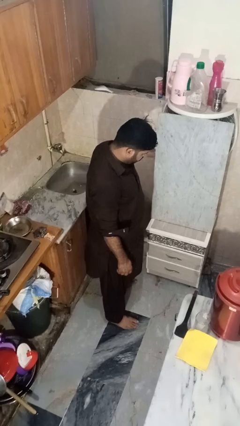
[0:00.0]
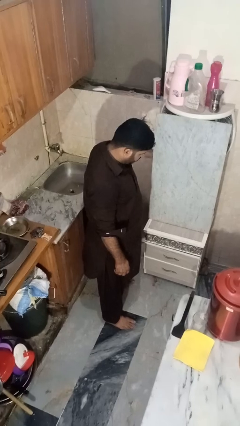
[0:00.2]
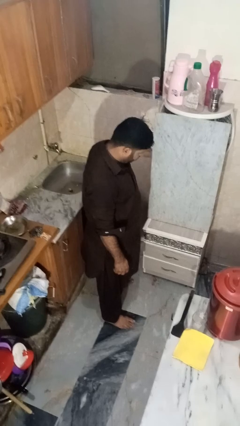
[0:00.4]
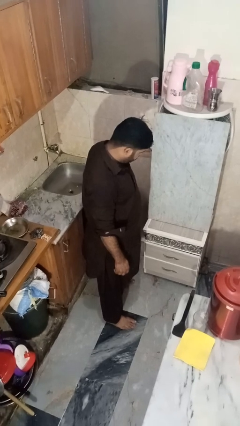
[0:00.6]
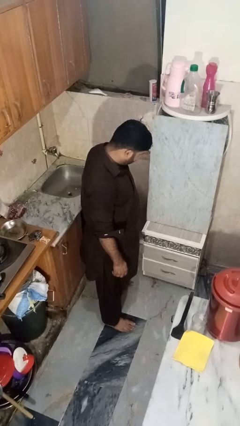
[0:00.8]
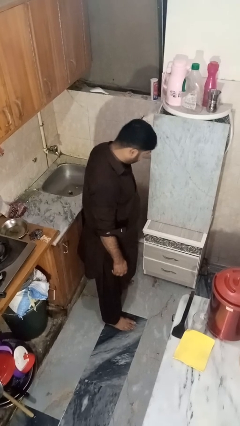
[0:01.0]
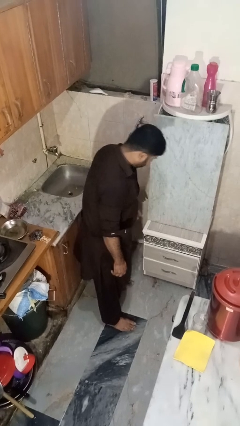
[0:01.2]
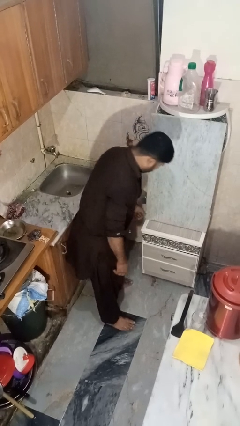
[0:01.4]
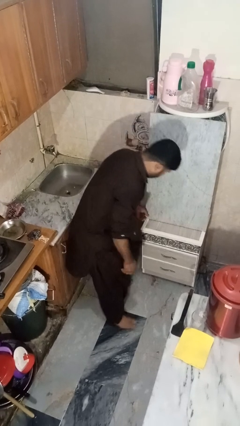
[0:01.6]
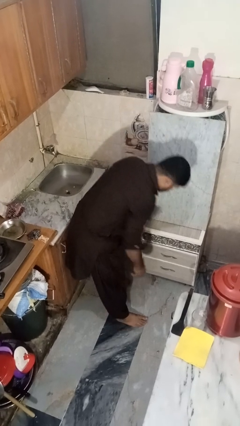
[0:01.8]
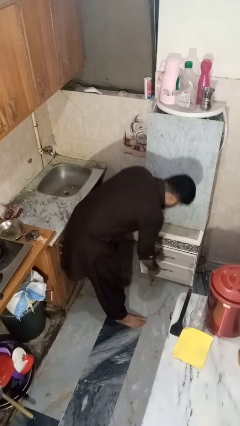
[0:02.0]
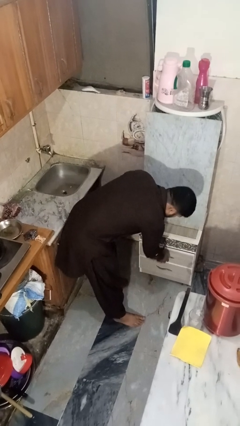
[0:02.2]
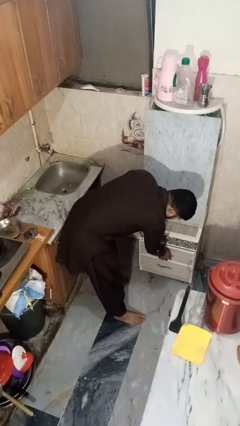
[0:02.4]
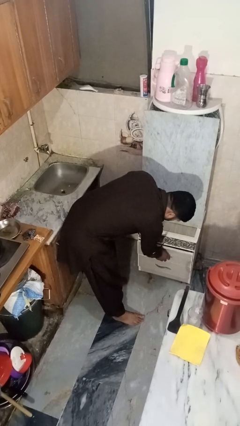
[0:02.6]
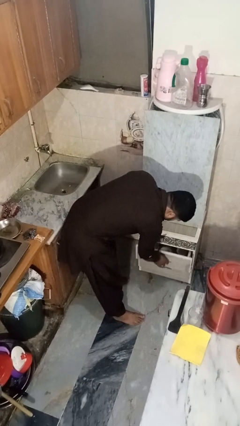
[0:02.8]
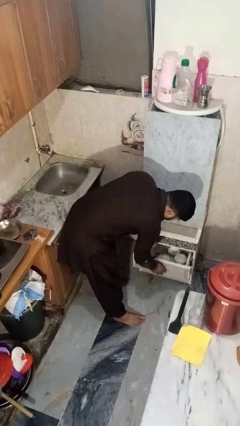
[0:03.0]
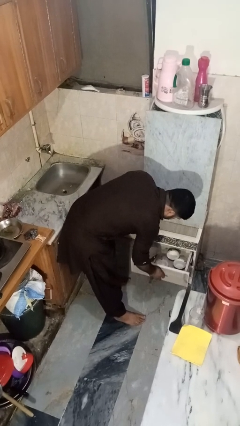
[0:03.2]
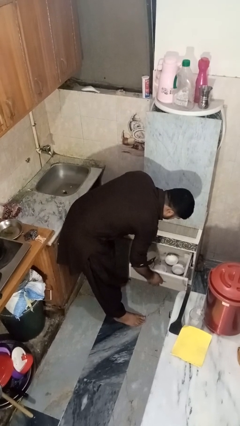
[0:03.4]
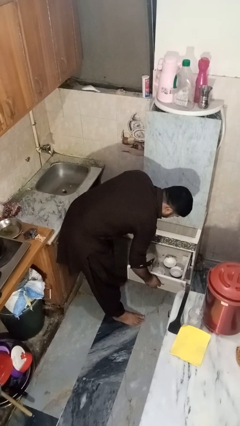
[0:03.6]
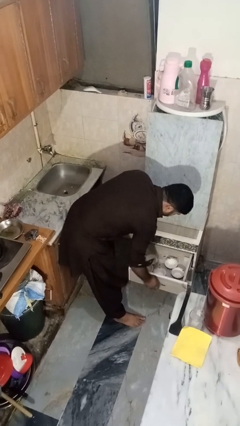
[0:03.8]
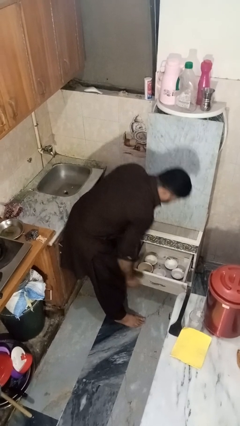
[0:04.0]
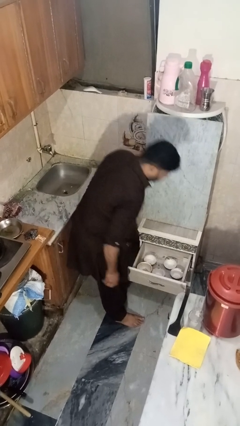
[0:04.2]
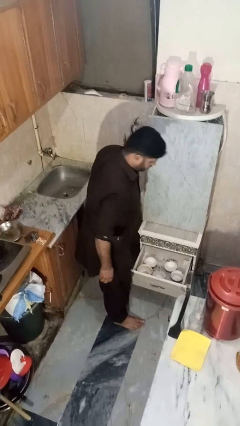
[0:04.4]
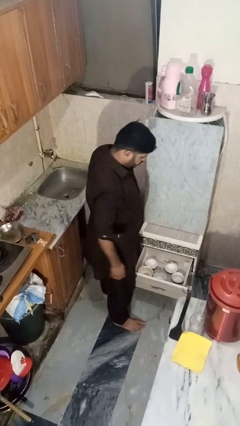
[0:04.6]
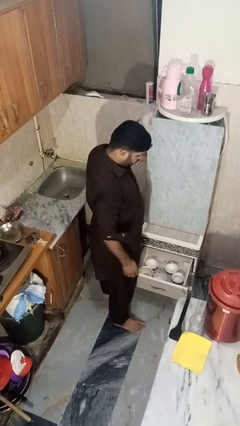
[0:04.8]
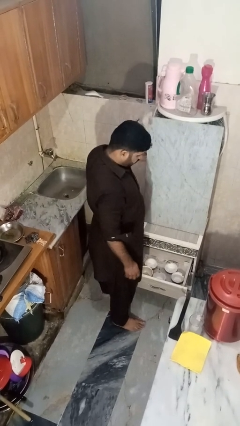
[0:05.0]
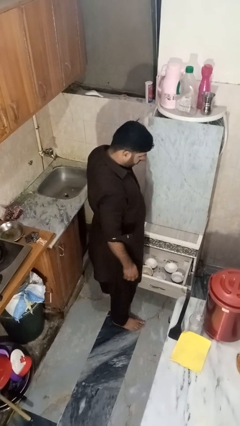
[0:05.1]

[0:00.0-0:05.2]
person opens kitchen drawer

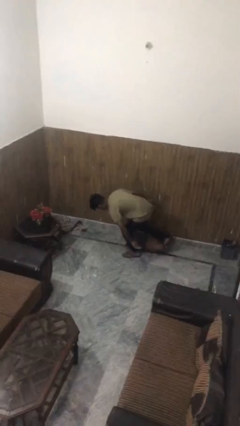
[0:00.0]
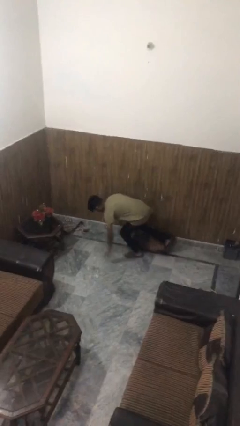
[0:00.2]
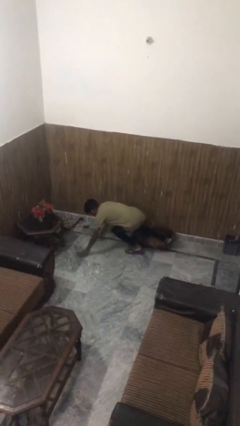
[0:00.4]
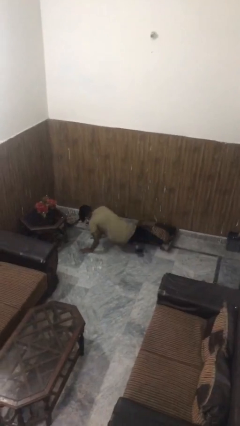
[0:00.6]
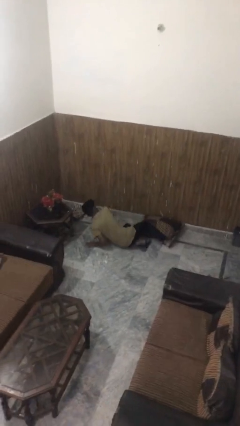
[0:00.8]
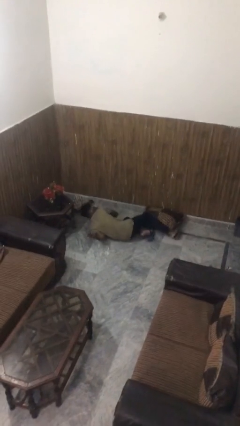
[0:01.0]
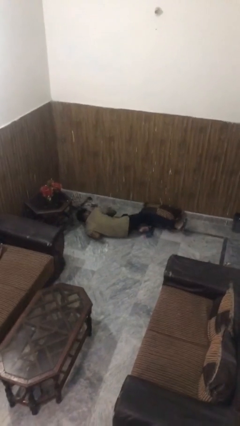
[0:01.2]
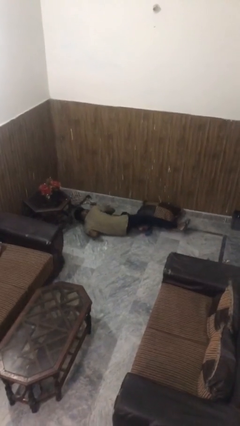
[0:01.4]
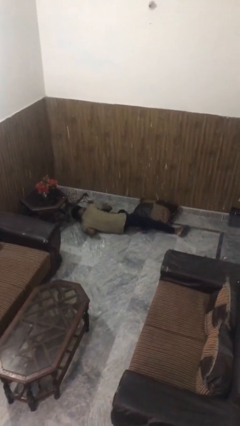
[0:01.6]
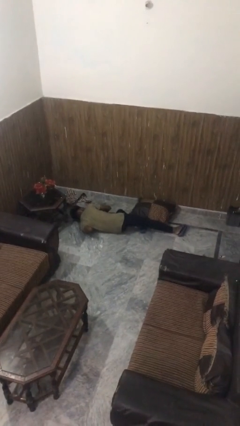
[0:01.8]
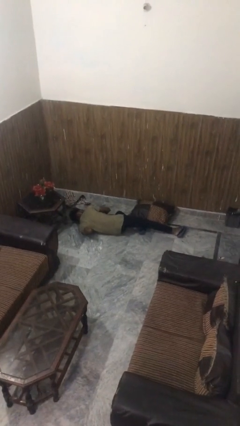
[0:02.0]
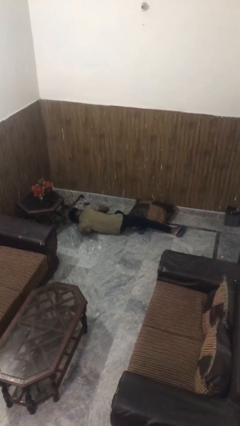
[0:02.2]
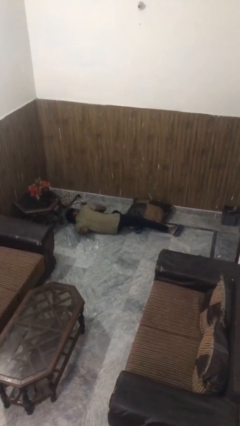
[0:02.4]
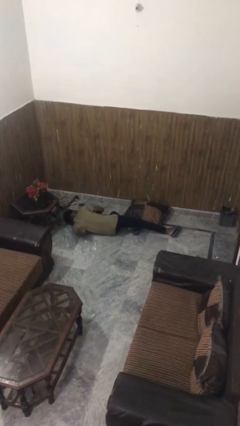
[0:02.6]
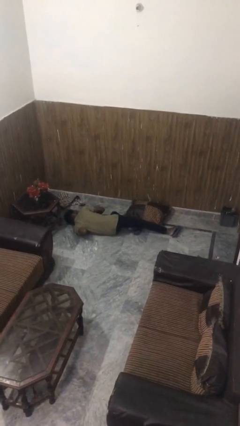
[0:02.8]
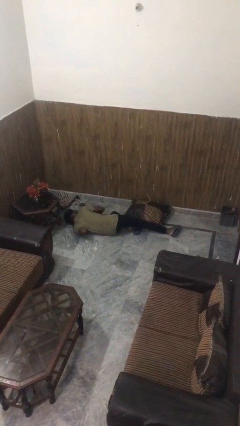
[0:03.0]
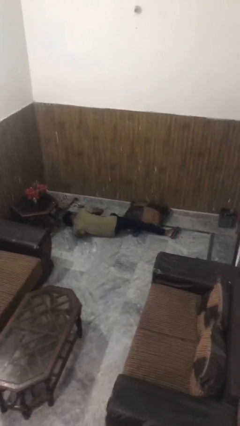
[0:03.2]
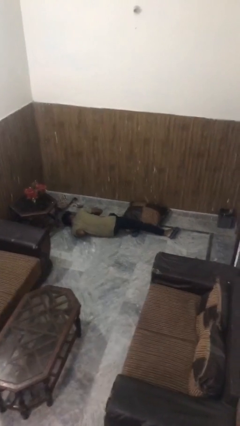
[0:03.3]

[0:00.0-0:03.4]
person lies down on floor

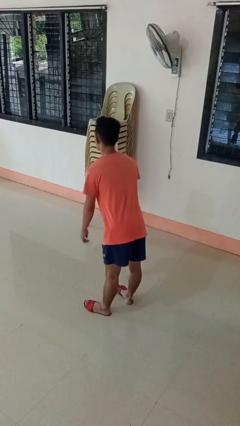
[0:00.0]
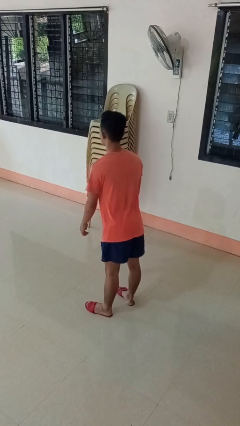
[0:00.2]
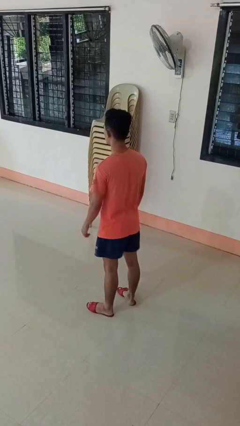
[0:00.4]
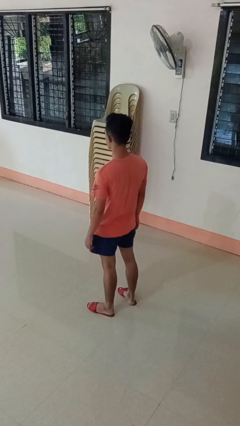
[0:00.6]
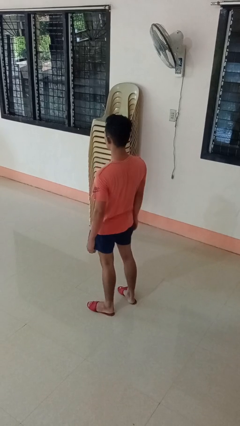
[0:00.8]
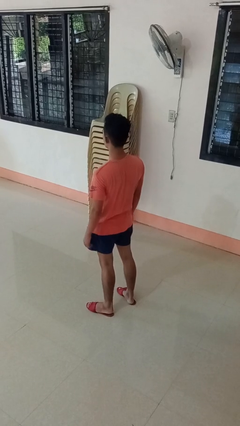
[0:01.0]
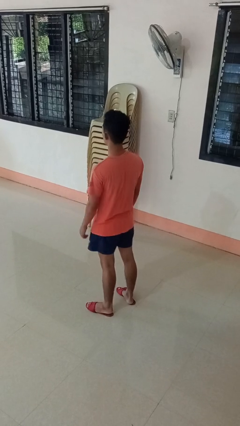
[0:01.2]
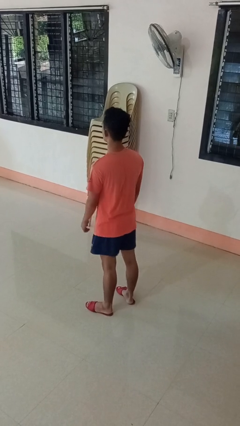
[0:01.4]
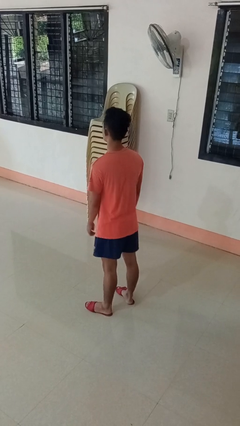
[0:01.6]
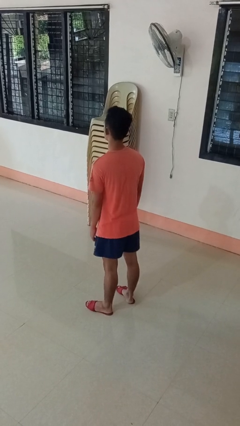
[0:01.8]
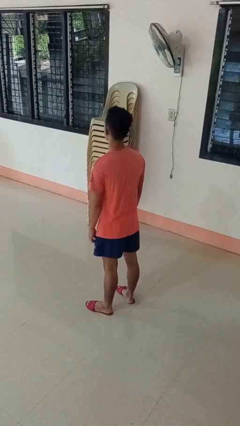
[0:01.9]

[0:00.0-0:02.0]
person wiggles hips

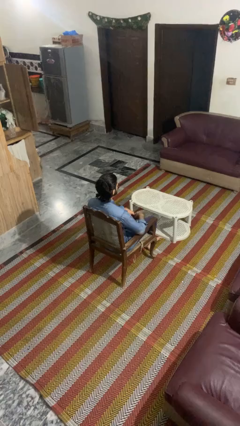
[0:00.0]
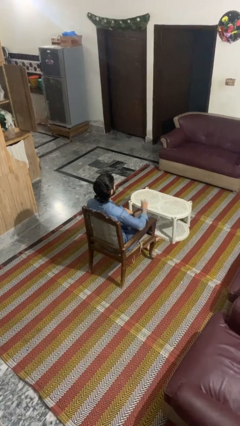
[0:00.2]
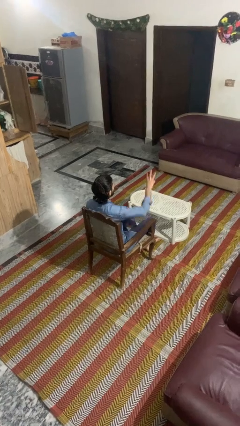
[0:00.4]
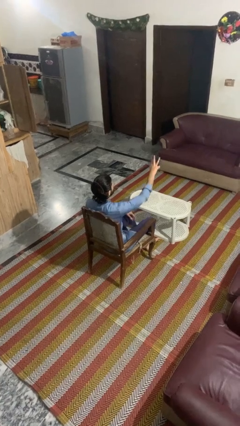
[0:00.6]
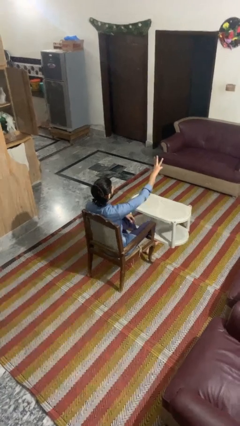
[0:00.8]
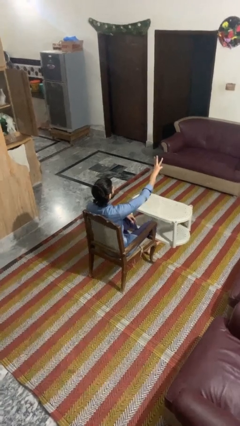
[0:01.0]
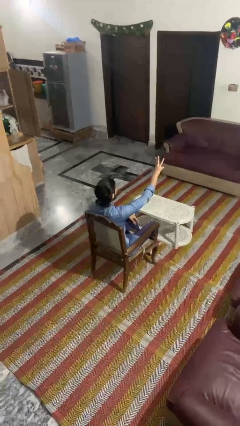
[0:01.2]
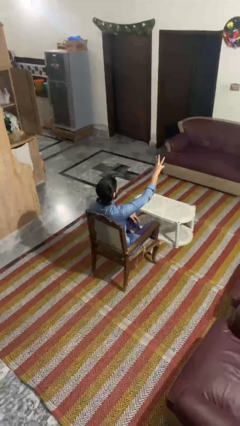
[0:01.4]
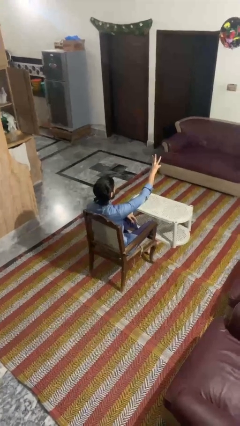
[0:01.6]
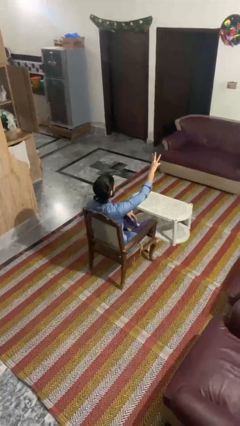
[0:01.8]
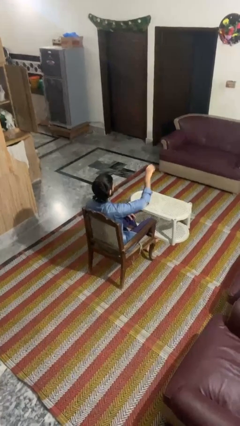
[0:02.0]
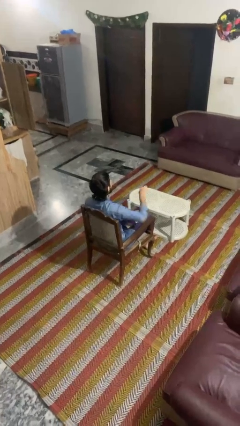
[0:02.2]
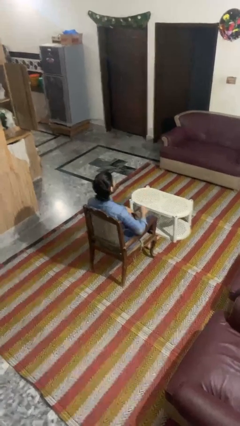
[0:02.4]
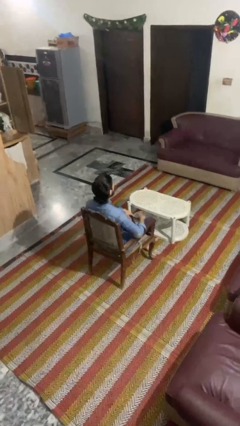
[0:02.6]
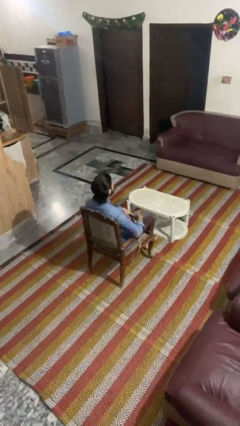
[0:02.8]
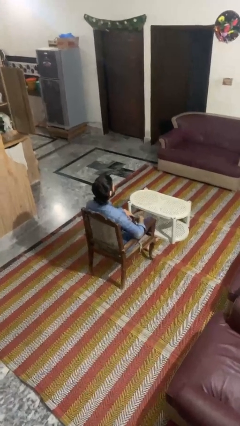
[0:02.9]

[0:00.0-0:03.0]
person gestures number three

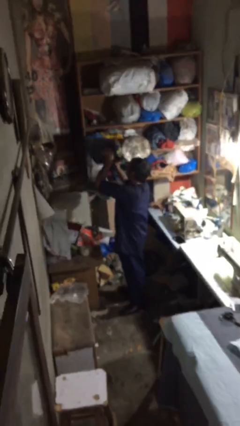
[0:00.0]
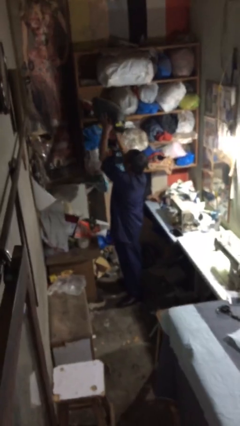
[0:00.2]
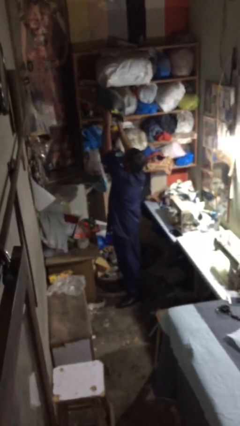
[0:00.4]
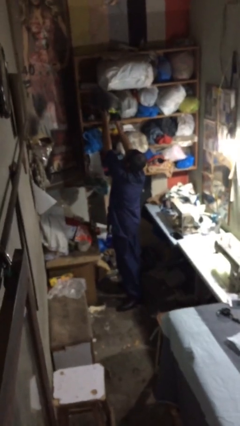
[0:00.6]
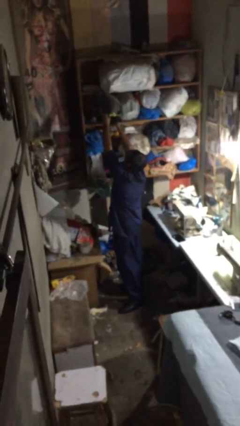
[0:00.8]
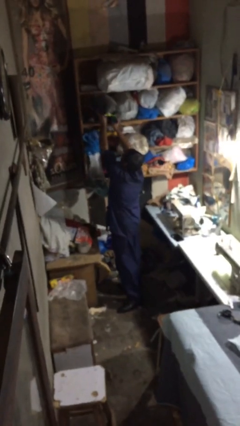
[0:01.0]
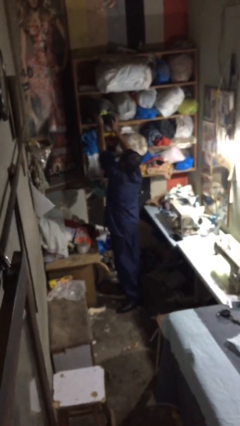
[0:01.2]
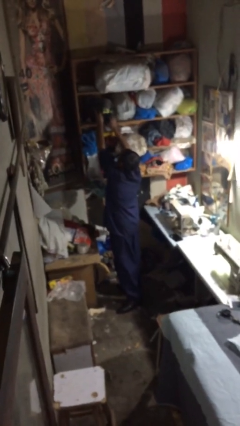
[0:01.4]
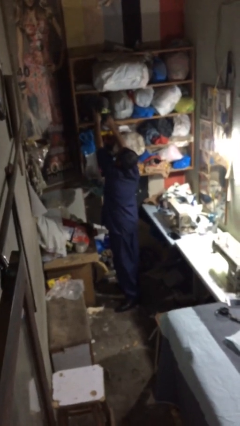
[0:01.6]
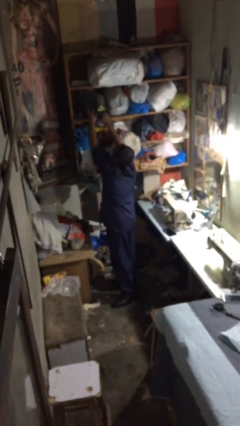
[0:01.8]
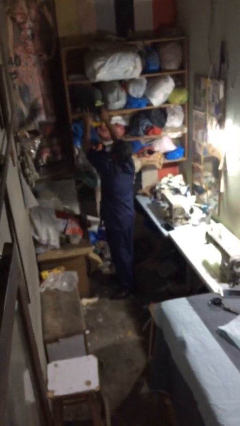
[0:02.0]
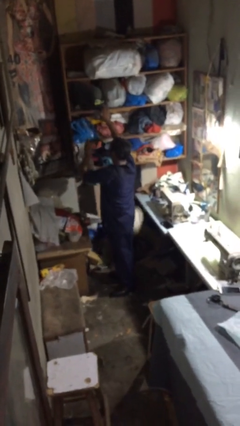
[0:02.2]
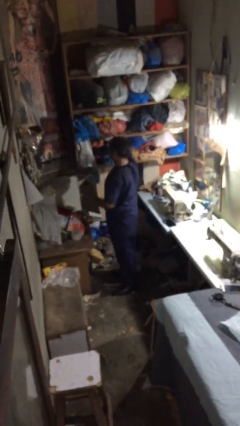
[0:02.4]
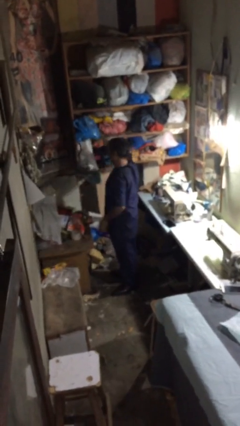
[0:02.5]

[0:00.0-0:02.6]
person puts down object on shelf

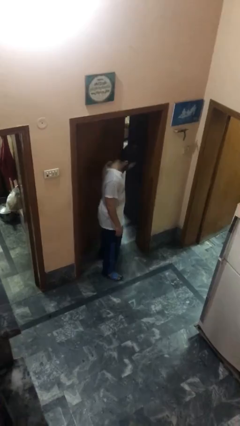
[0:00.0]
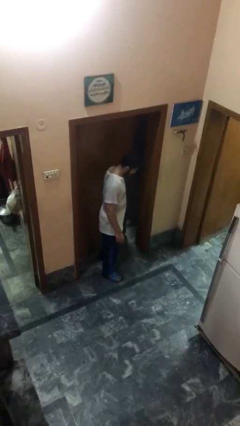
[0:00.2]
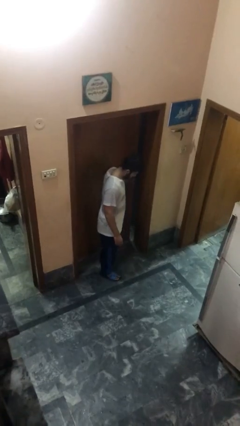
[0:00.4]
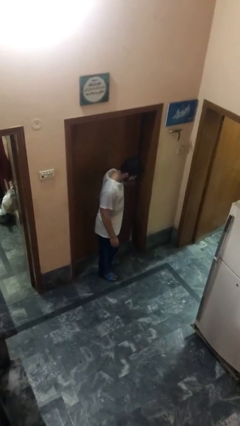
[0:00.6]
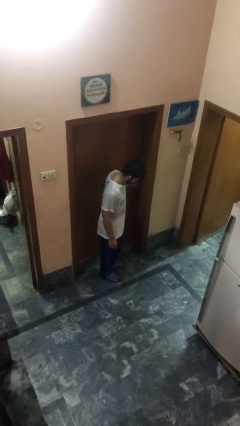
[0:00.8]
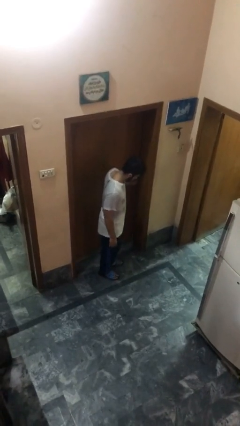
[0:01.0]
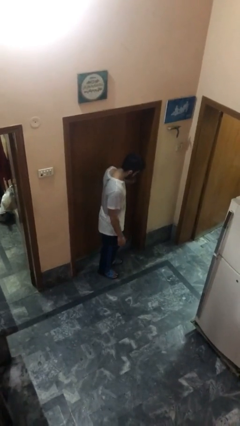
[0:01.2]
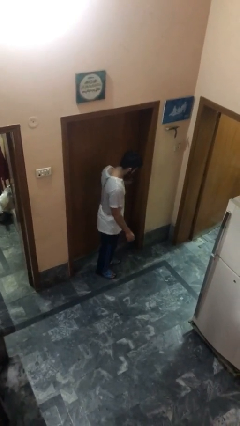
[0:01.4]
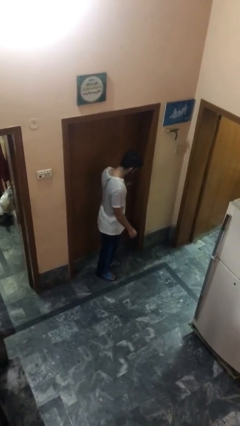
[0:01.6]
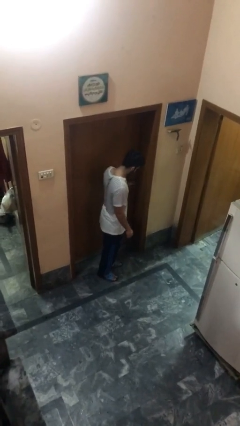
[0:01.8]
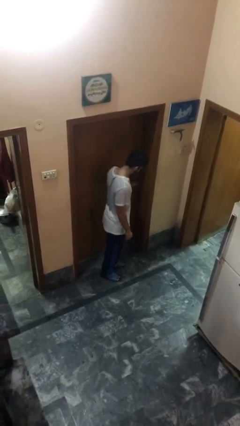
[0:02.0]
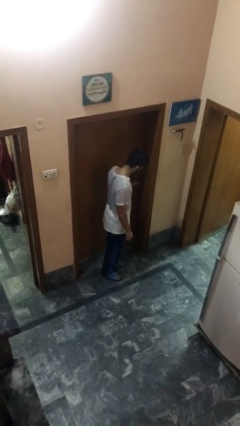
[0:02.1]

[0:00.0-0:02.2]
person closes facility door
